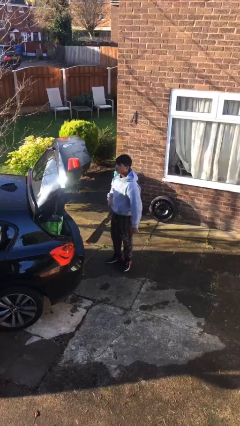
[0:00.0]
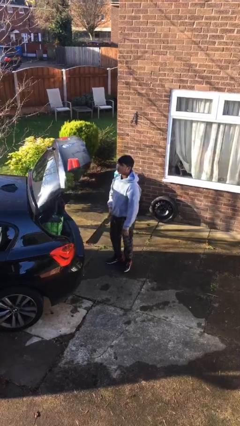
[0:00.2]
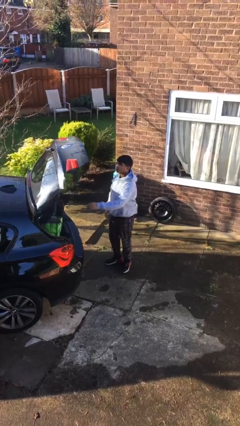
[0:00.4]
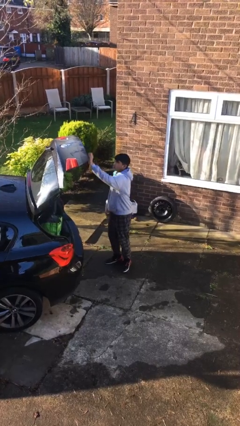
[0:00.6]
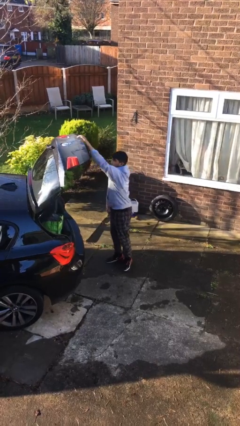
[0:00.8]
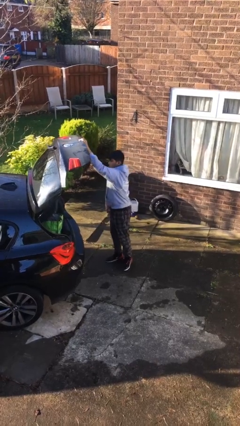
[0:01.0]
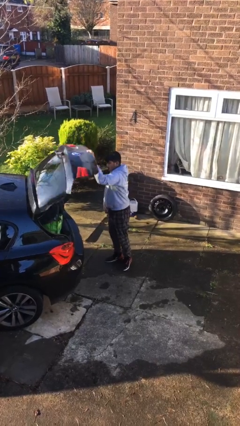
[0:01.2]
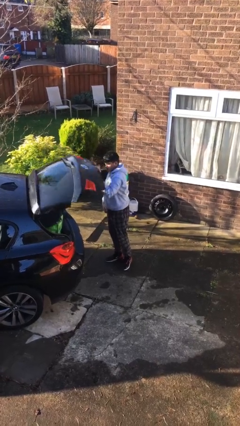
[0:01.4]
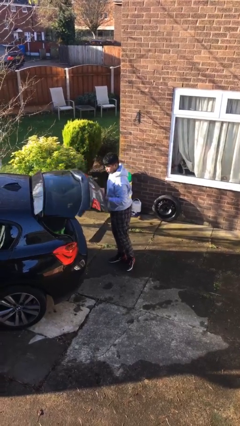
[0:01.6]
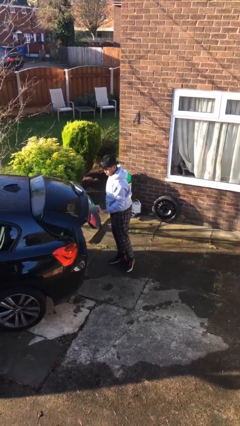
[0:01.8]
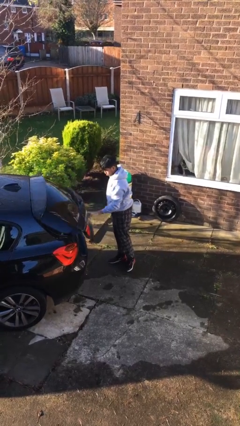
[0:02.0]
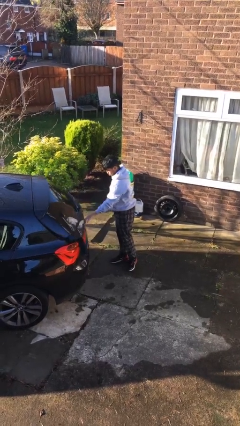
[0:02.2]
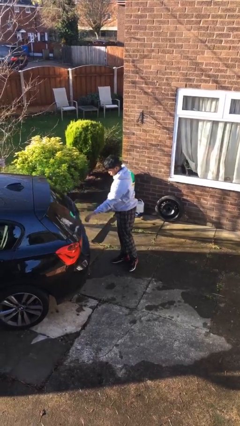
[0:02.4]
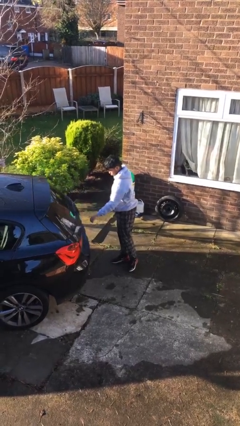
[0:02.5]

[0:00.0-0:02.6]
person closes car trunk

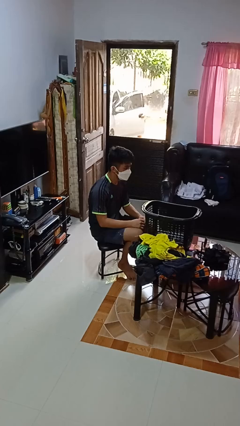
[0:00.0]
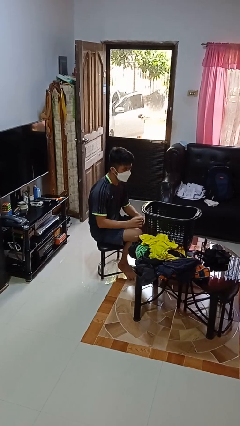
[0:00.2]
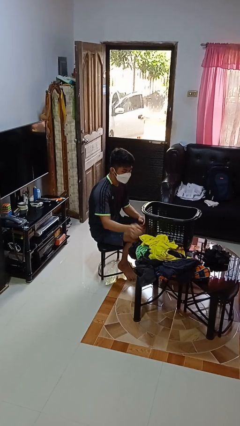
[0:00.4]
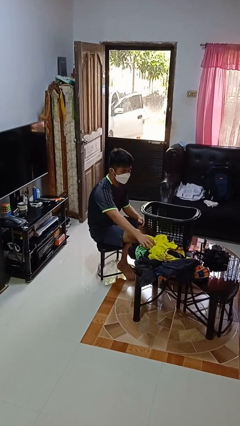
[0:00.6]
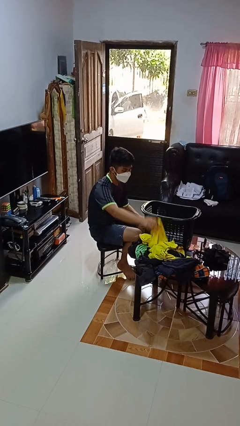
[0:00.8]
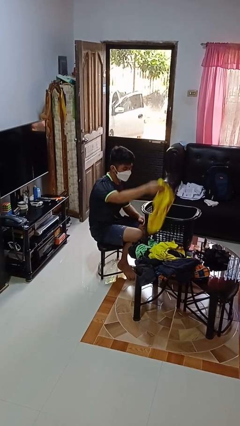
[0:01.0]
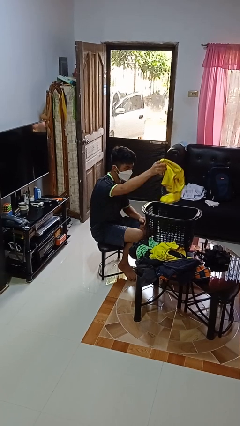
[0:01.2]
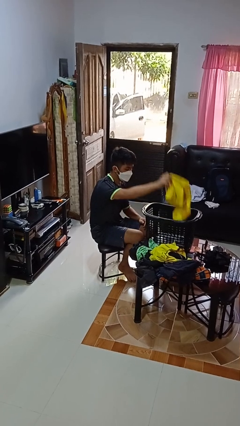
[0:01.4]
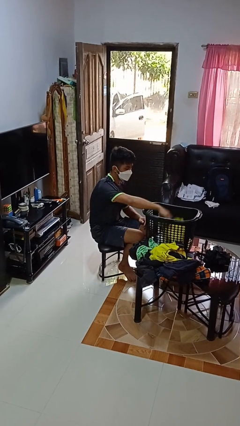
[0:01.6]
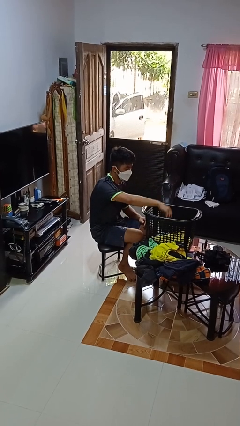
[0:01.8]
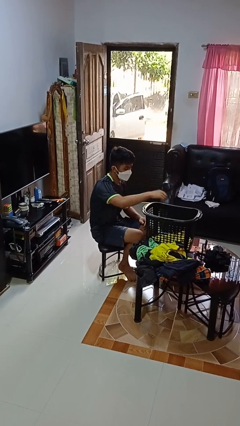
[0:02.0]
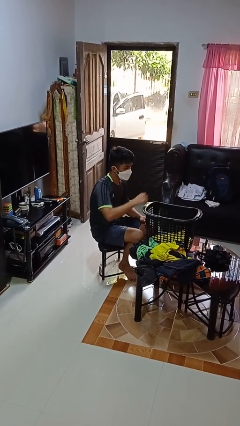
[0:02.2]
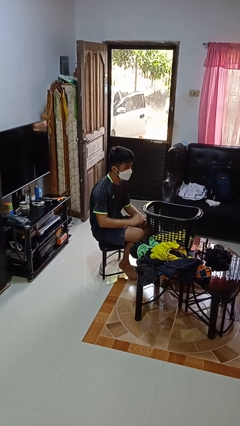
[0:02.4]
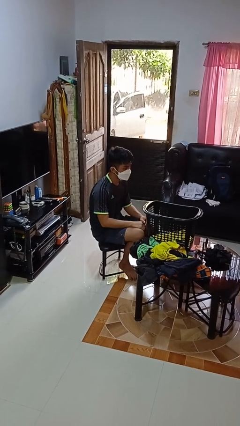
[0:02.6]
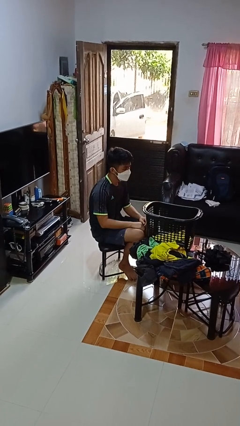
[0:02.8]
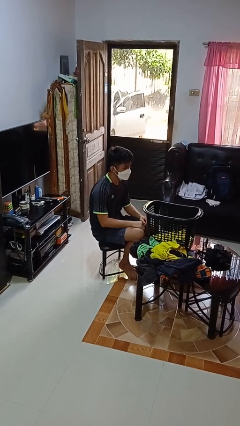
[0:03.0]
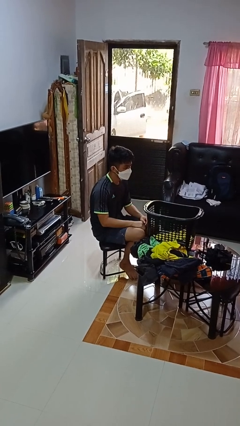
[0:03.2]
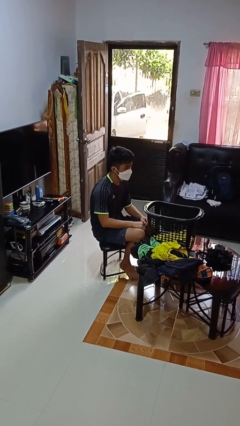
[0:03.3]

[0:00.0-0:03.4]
person puts object into basket

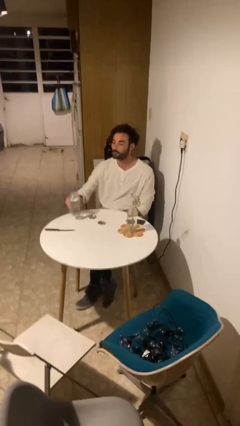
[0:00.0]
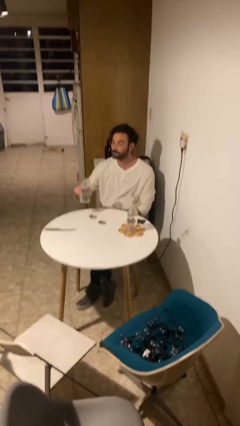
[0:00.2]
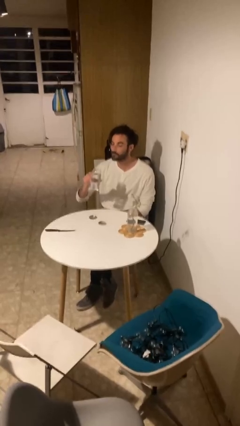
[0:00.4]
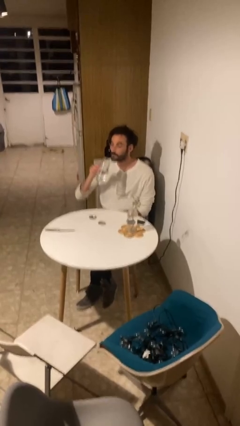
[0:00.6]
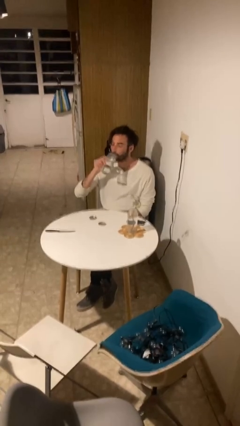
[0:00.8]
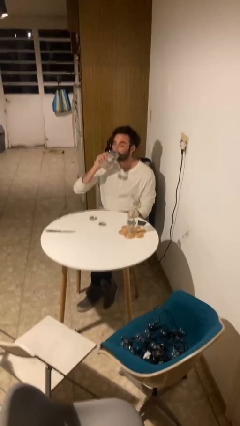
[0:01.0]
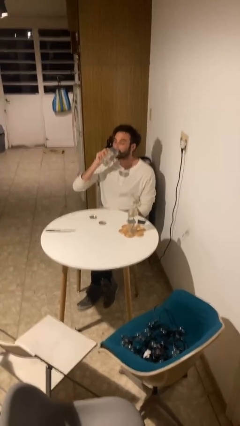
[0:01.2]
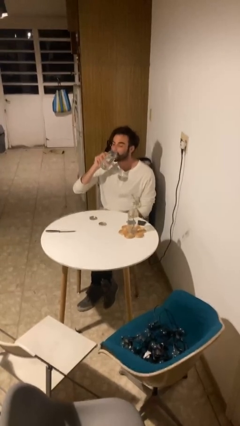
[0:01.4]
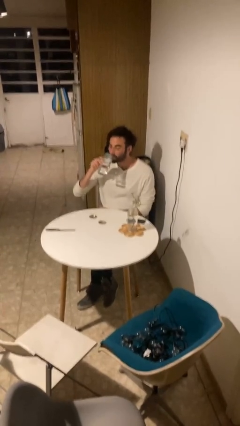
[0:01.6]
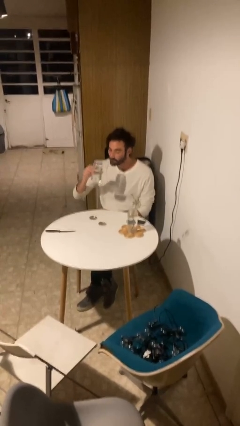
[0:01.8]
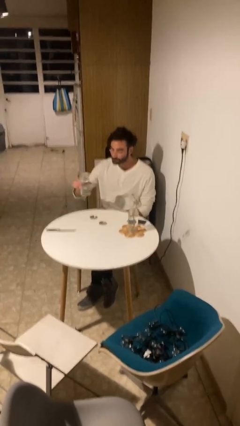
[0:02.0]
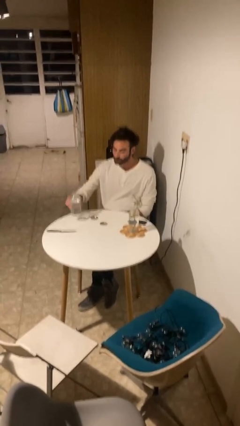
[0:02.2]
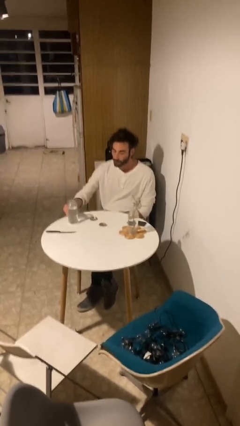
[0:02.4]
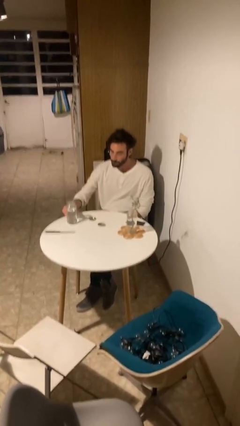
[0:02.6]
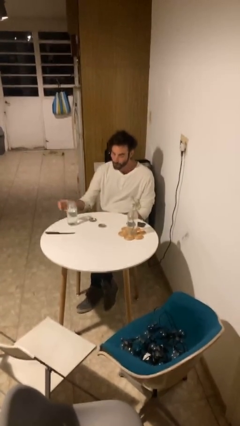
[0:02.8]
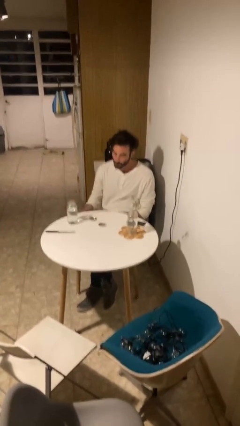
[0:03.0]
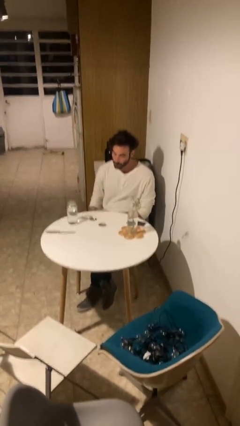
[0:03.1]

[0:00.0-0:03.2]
person drinks from cup

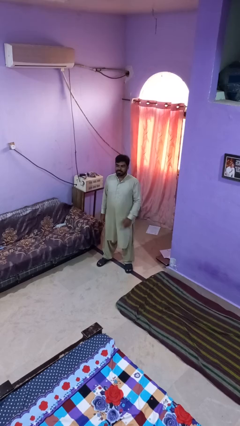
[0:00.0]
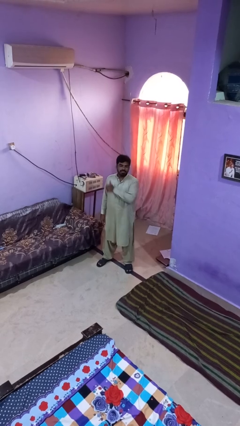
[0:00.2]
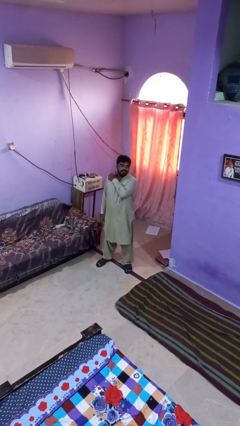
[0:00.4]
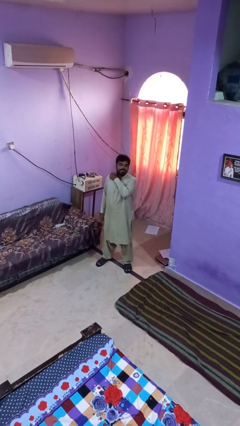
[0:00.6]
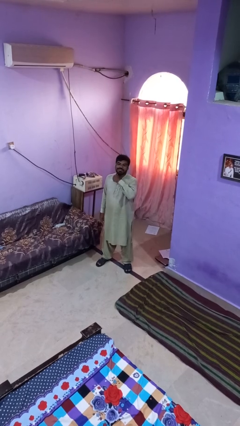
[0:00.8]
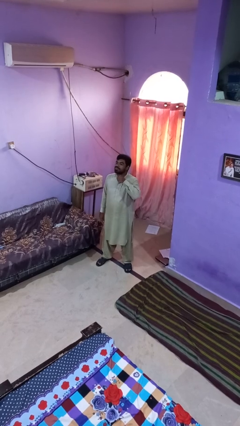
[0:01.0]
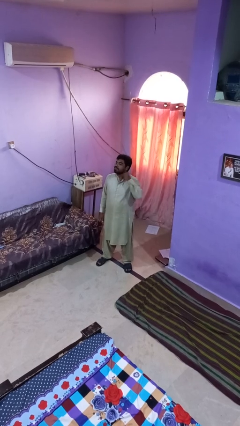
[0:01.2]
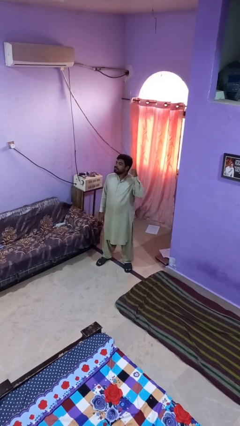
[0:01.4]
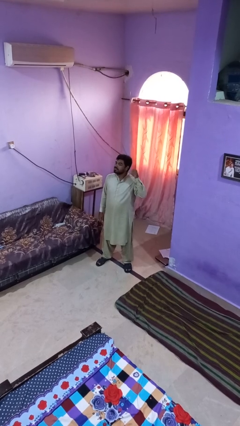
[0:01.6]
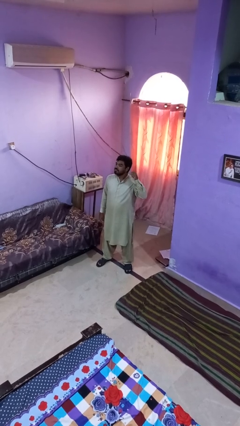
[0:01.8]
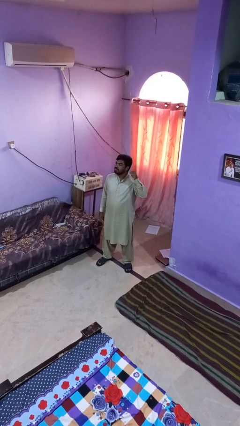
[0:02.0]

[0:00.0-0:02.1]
person gestures cut

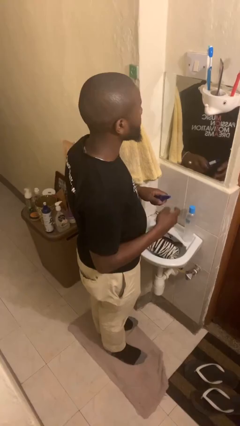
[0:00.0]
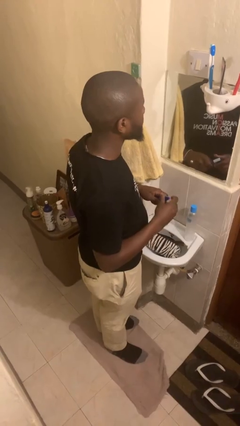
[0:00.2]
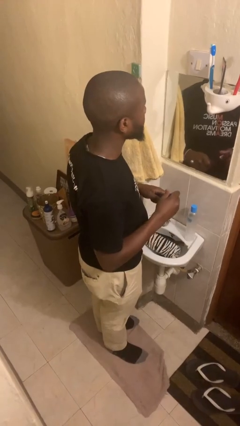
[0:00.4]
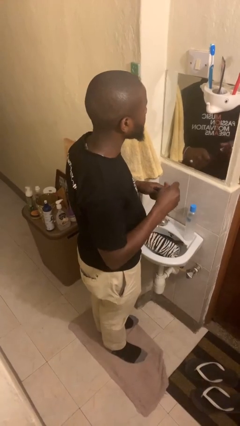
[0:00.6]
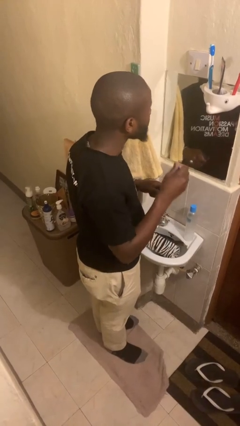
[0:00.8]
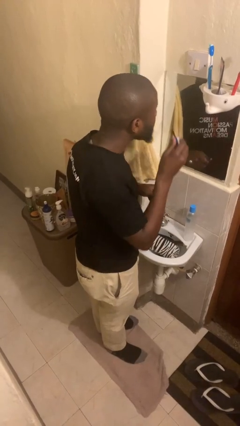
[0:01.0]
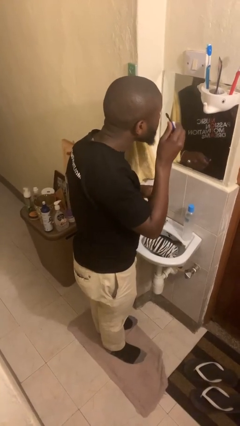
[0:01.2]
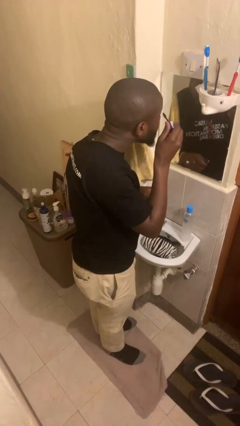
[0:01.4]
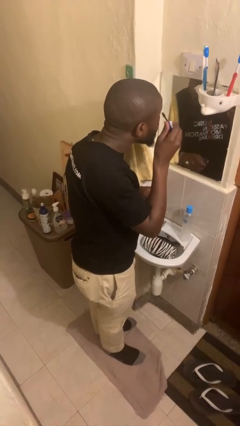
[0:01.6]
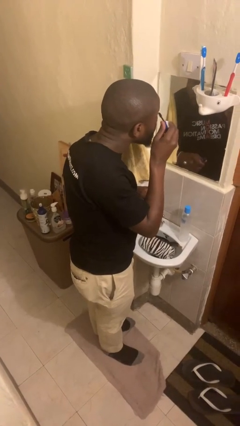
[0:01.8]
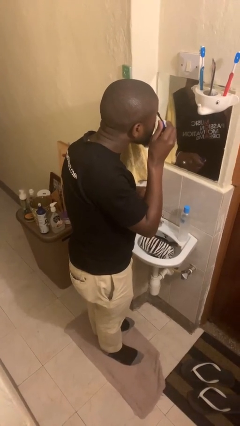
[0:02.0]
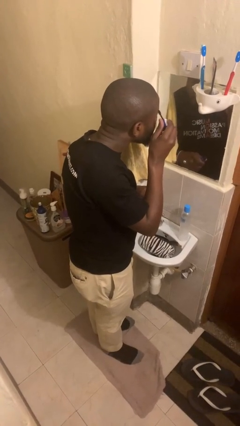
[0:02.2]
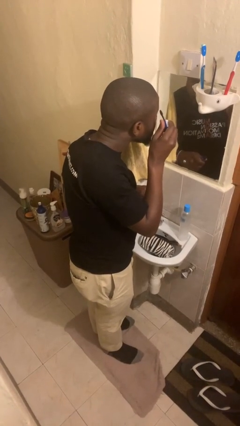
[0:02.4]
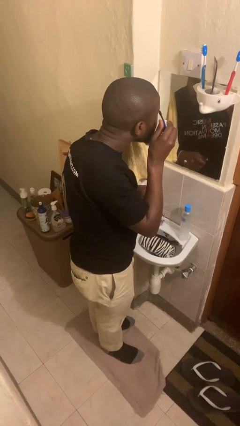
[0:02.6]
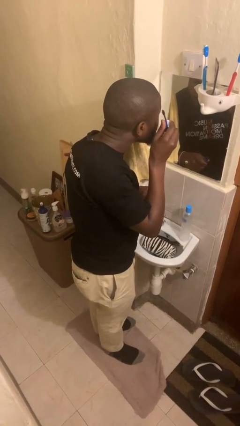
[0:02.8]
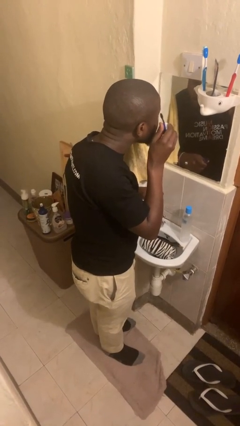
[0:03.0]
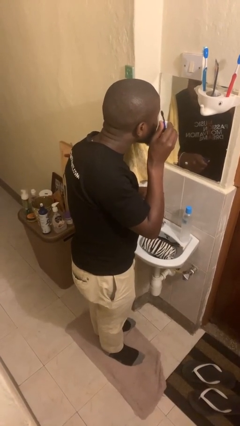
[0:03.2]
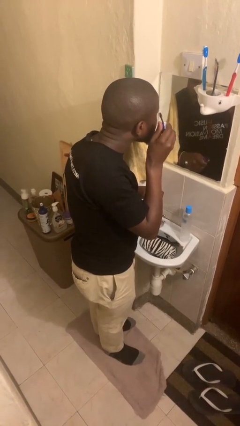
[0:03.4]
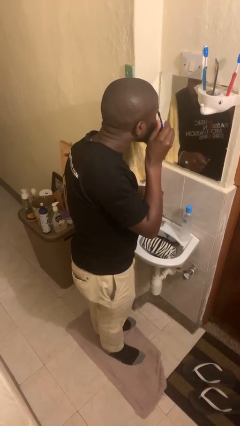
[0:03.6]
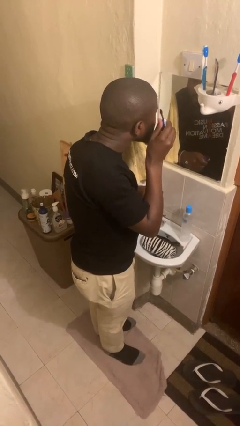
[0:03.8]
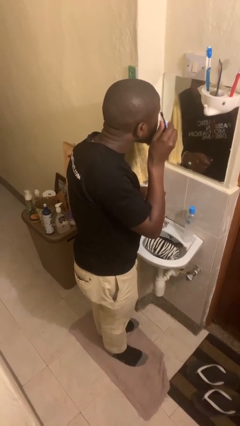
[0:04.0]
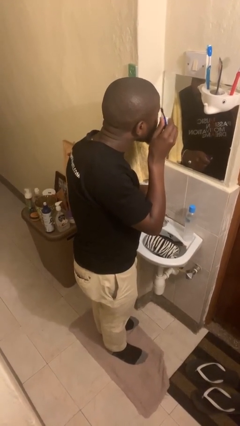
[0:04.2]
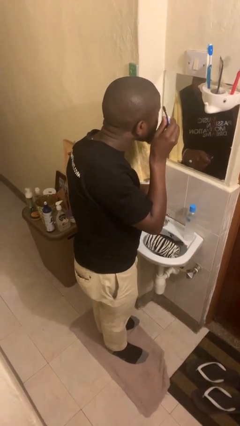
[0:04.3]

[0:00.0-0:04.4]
person applies eye makeup

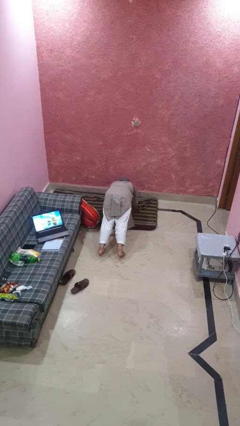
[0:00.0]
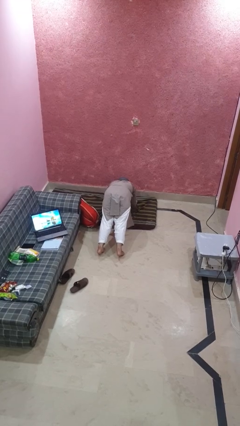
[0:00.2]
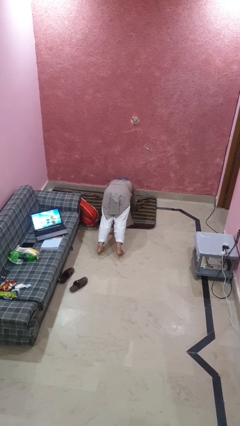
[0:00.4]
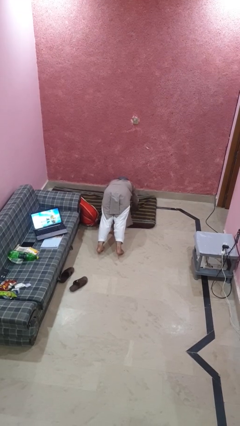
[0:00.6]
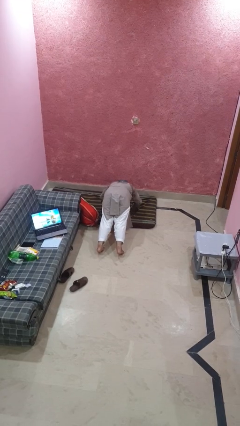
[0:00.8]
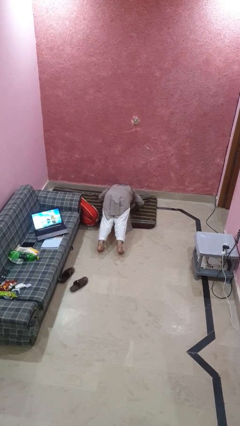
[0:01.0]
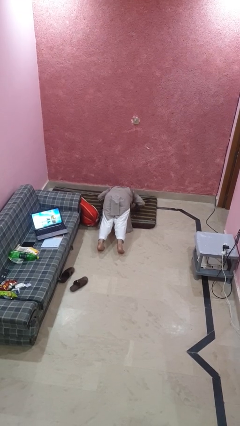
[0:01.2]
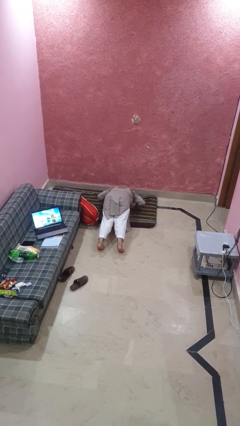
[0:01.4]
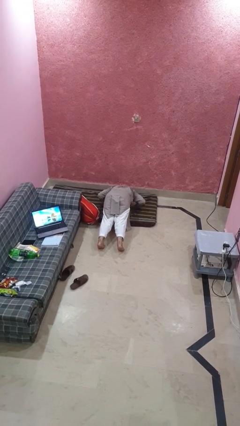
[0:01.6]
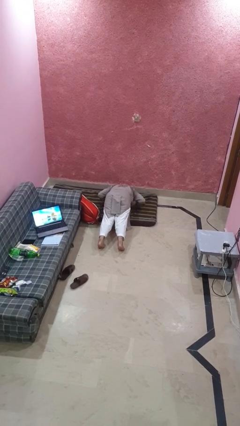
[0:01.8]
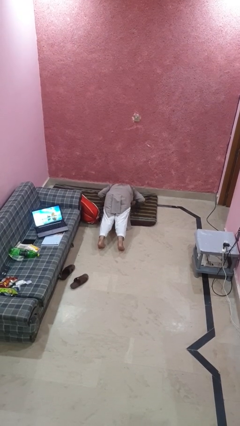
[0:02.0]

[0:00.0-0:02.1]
person exercises with pushup
